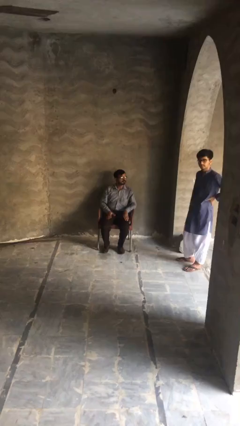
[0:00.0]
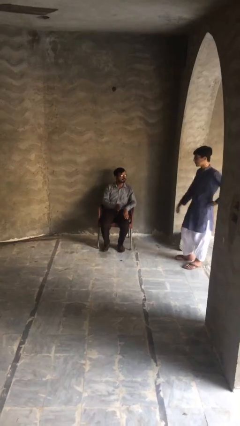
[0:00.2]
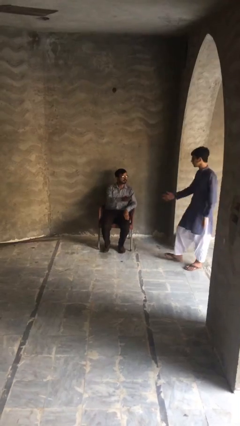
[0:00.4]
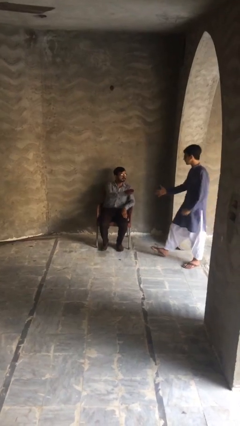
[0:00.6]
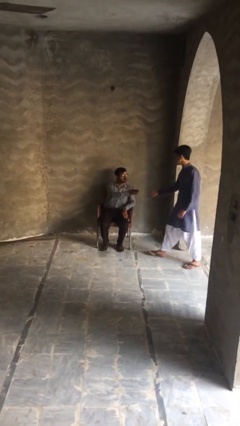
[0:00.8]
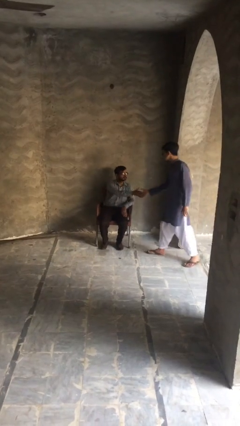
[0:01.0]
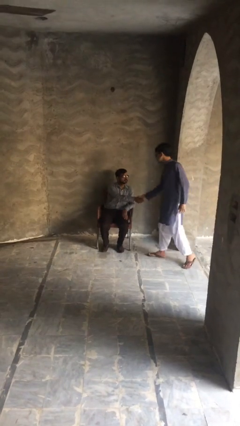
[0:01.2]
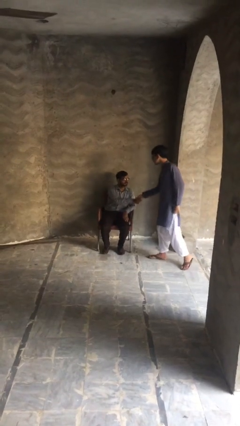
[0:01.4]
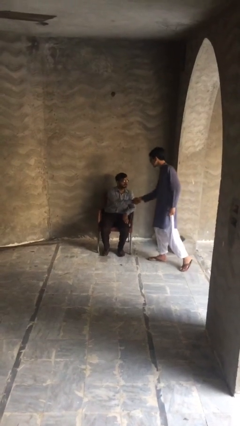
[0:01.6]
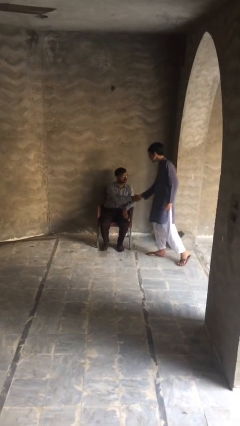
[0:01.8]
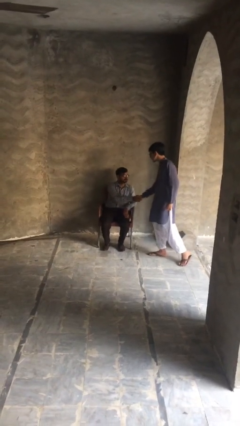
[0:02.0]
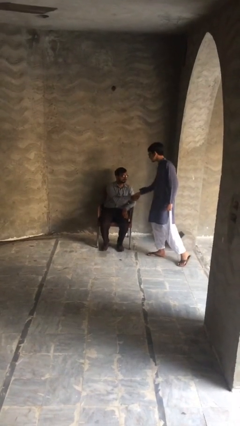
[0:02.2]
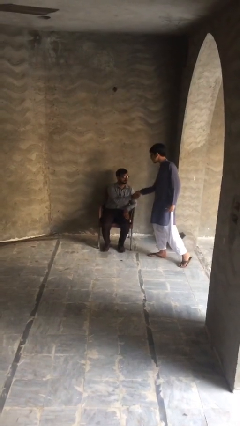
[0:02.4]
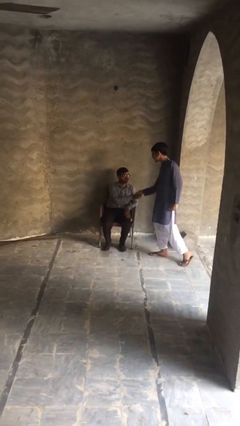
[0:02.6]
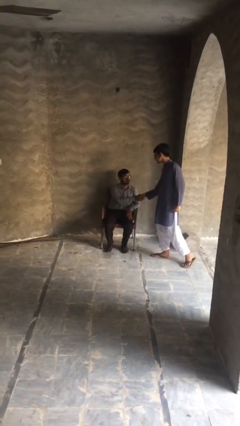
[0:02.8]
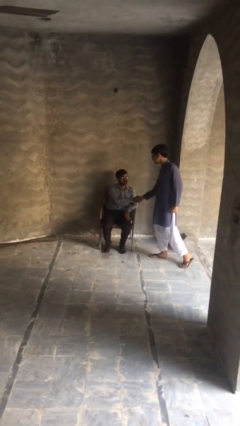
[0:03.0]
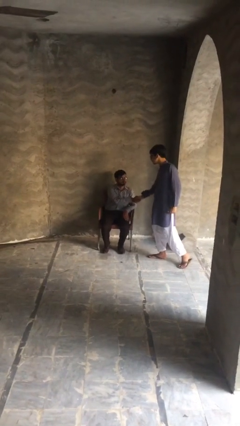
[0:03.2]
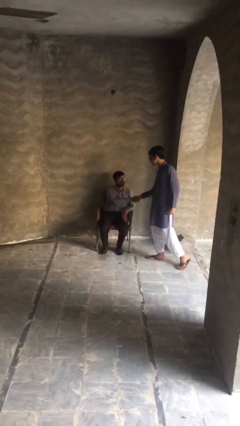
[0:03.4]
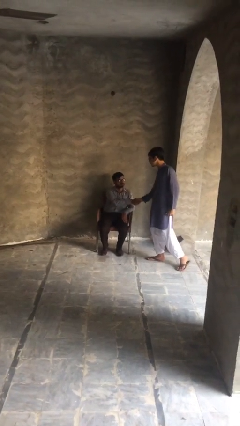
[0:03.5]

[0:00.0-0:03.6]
person shakes hand

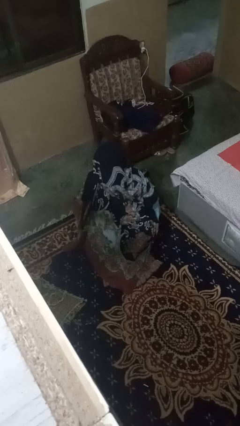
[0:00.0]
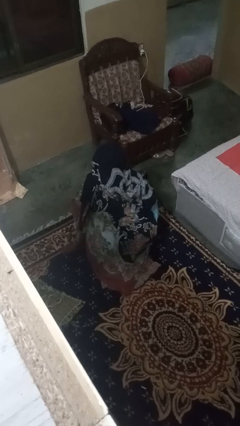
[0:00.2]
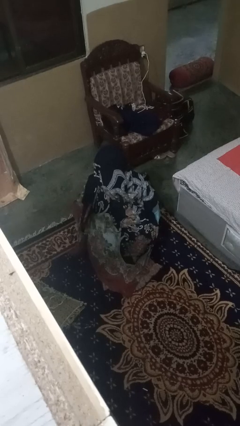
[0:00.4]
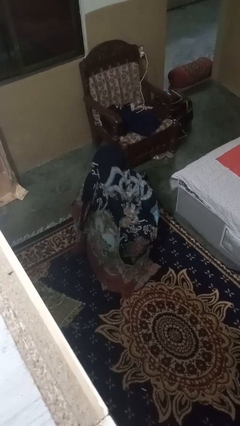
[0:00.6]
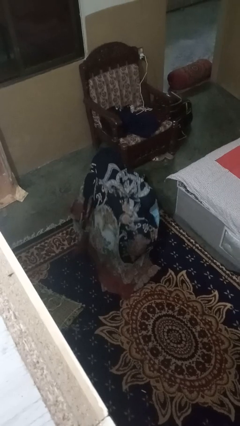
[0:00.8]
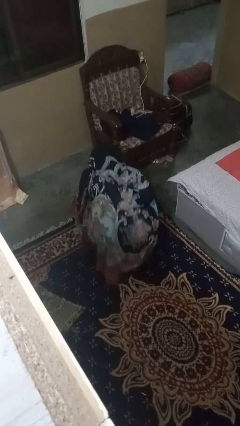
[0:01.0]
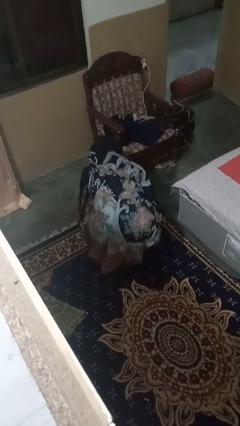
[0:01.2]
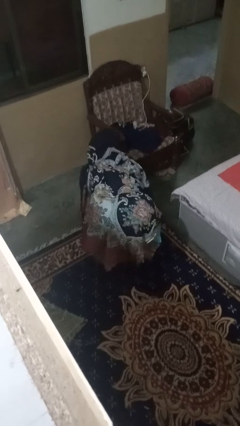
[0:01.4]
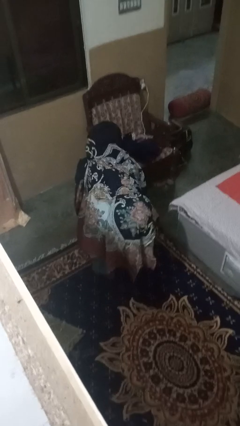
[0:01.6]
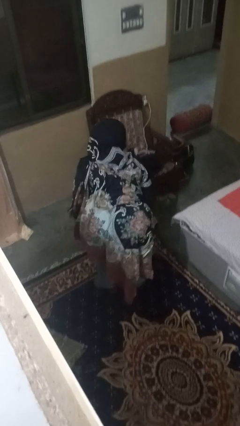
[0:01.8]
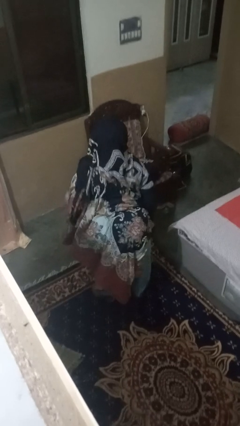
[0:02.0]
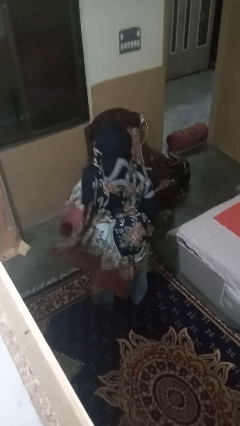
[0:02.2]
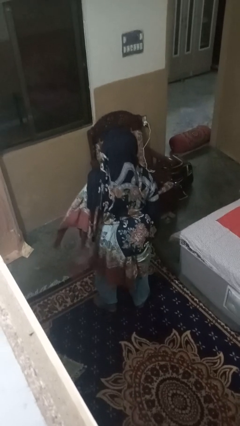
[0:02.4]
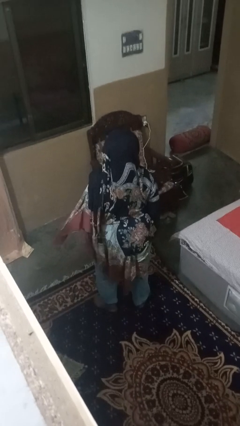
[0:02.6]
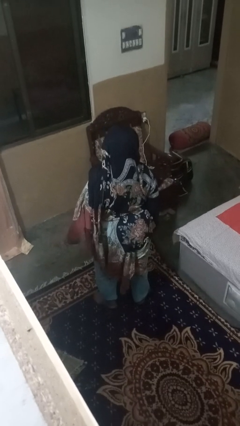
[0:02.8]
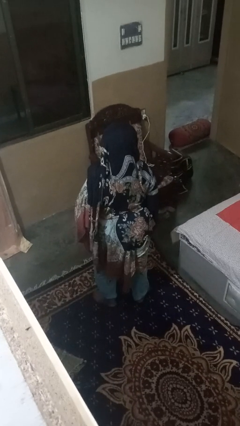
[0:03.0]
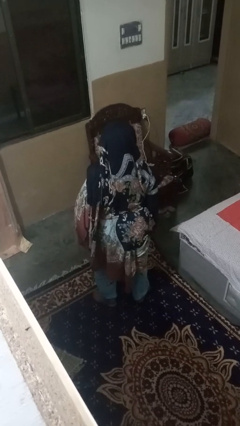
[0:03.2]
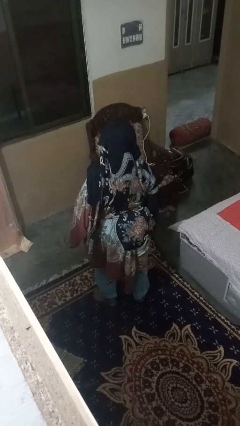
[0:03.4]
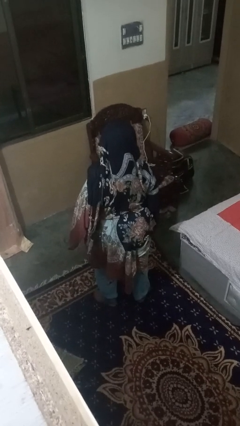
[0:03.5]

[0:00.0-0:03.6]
person stands up

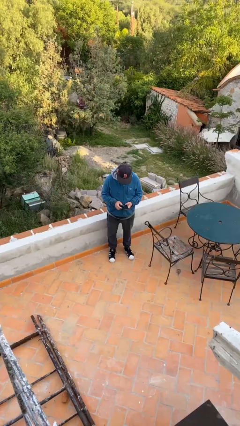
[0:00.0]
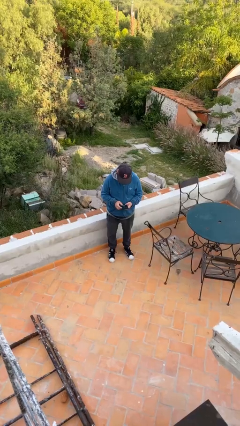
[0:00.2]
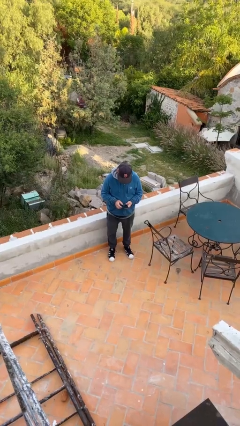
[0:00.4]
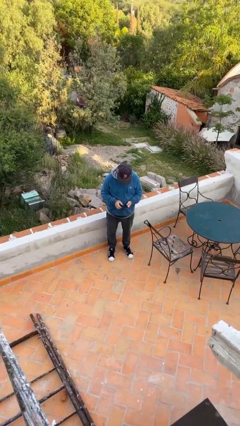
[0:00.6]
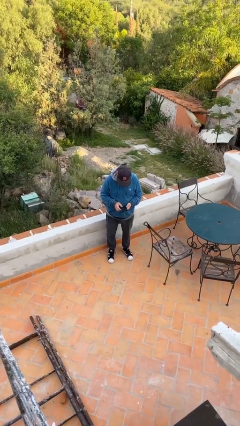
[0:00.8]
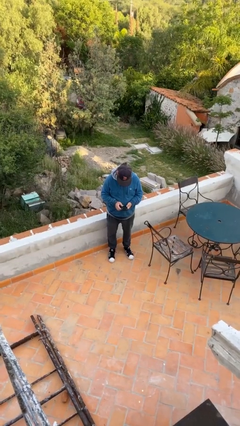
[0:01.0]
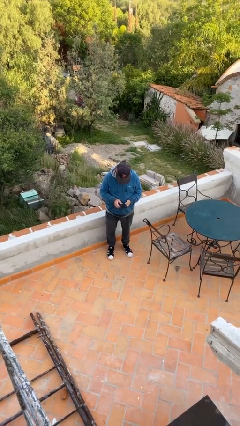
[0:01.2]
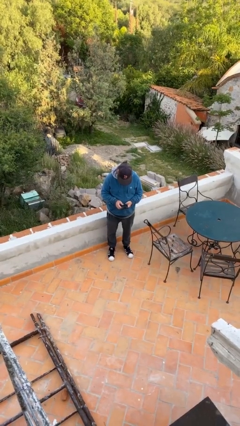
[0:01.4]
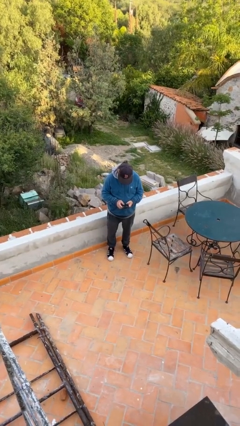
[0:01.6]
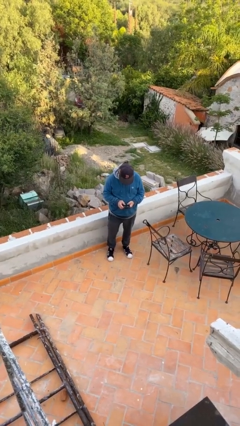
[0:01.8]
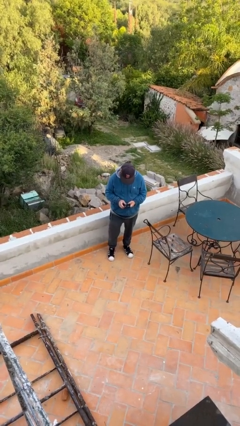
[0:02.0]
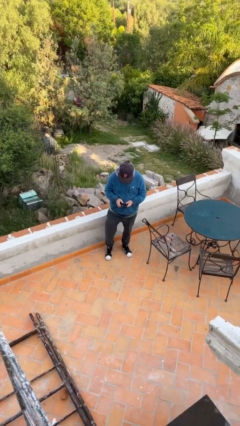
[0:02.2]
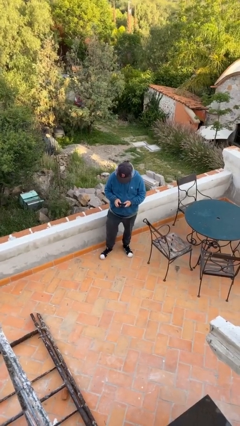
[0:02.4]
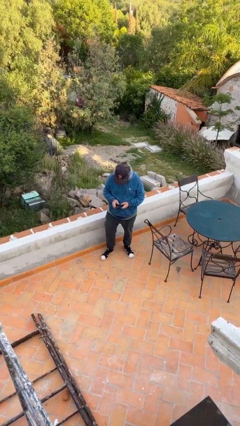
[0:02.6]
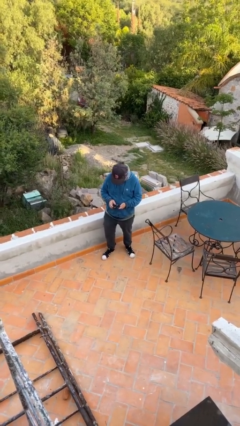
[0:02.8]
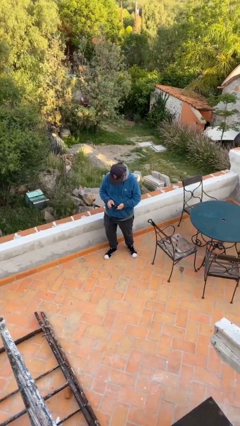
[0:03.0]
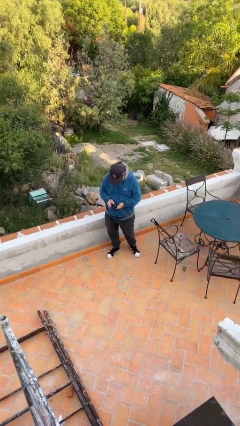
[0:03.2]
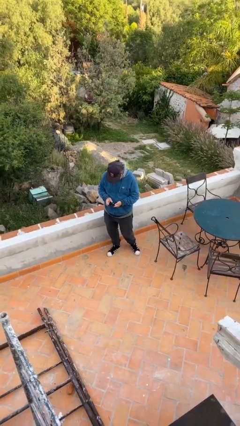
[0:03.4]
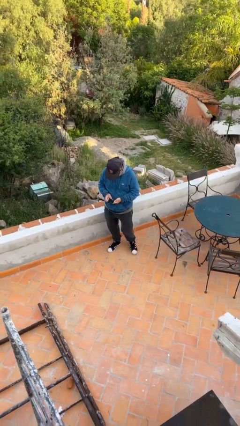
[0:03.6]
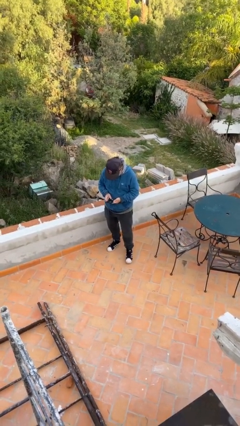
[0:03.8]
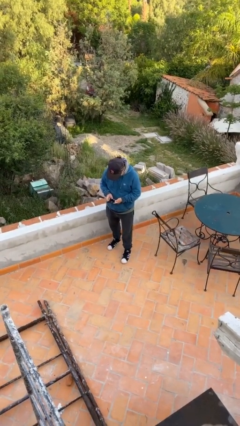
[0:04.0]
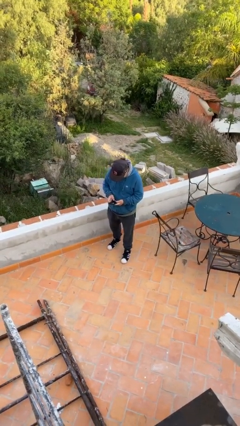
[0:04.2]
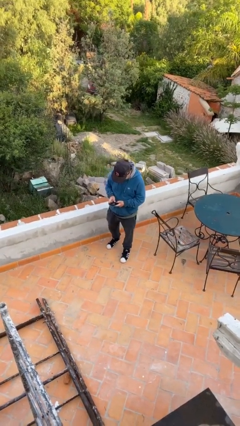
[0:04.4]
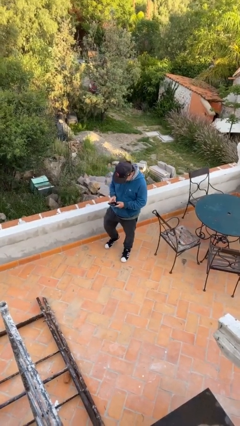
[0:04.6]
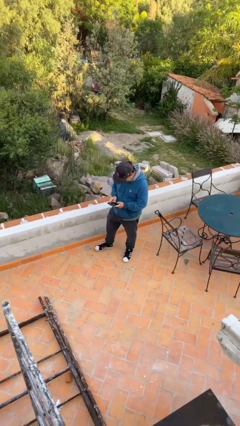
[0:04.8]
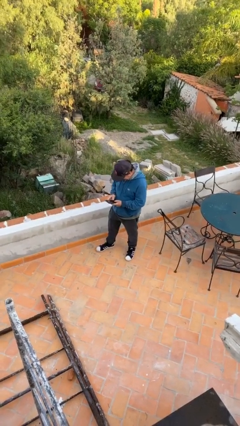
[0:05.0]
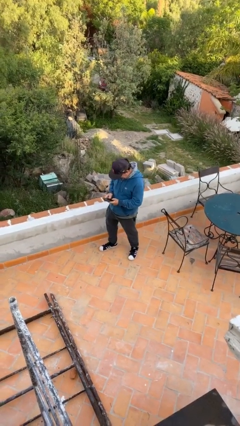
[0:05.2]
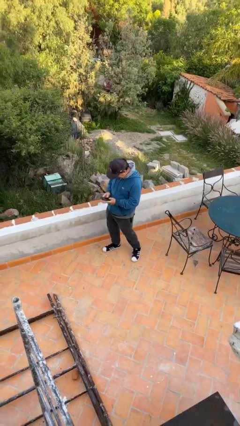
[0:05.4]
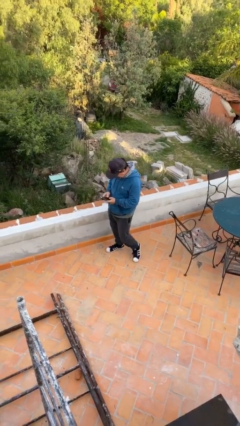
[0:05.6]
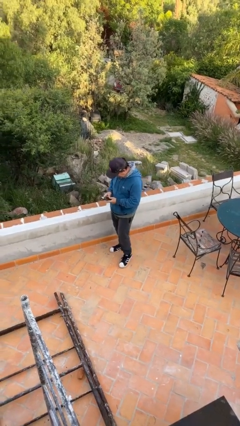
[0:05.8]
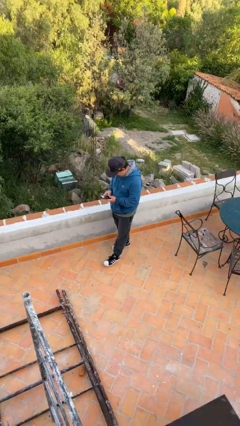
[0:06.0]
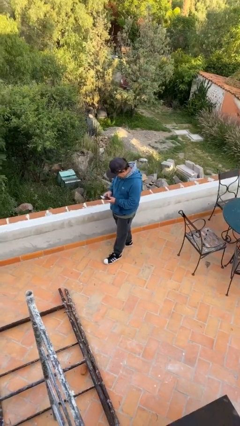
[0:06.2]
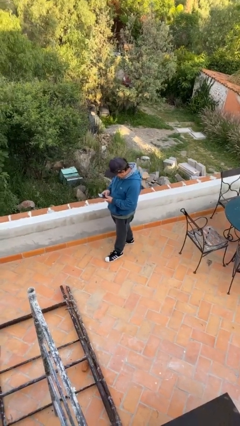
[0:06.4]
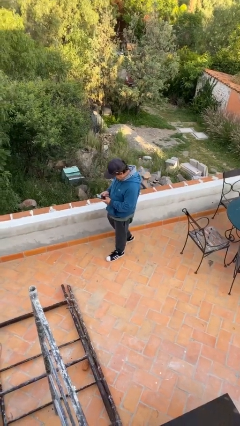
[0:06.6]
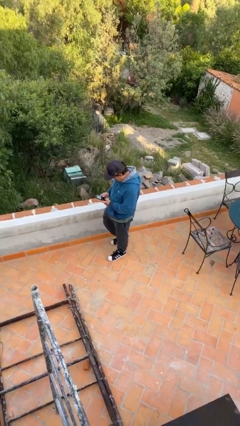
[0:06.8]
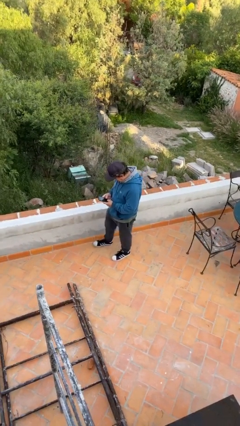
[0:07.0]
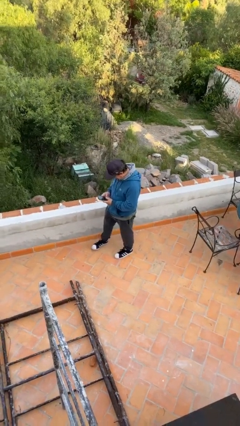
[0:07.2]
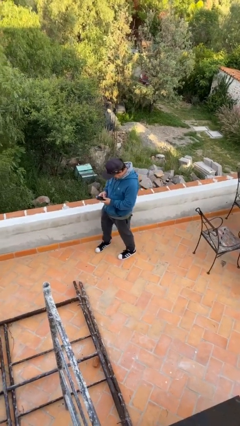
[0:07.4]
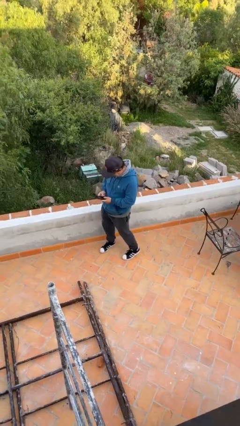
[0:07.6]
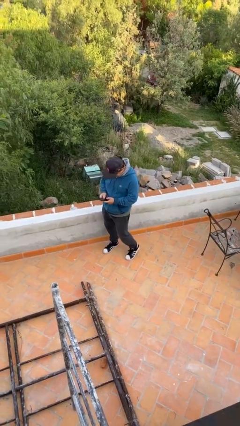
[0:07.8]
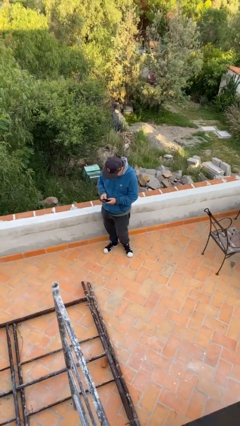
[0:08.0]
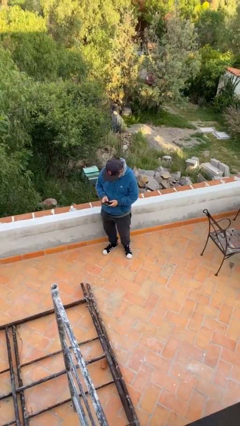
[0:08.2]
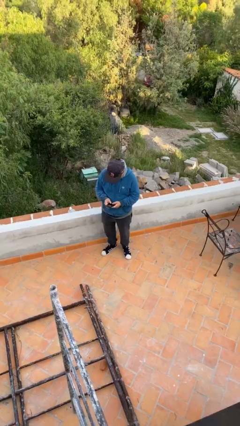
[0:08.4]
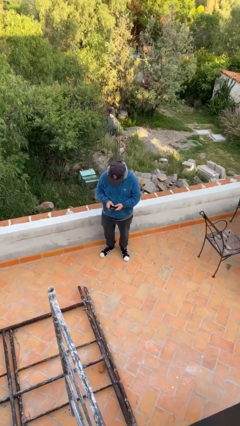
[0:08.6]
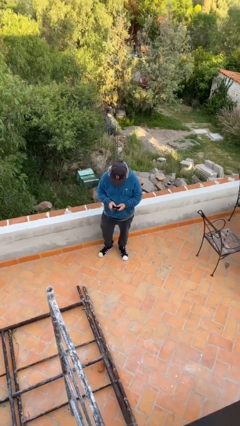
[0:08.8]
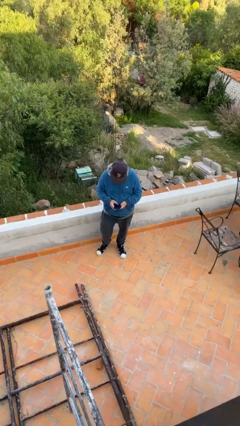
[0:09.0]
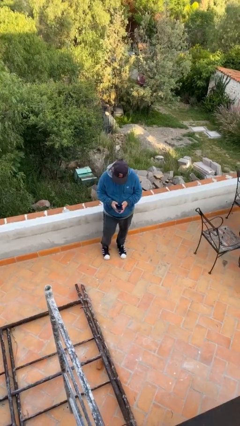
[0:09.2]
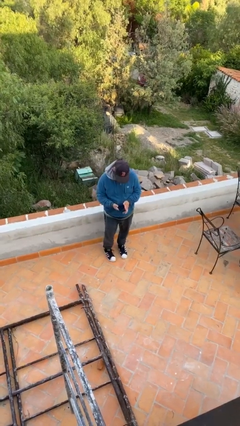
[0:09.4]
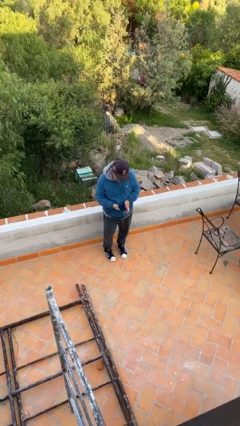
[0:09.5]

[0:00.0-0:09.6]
person texts on phone

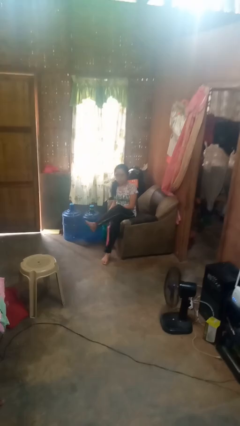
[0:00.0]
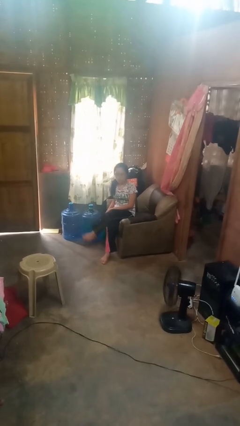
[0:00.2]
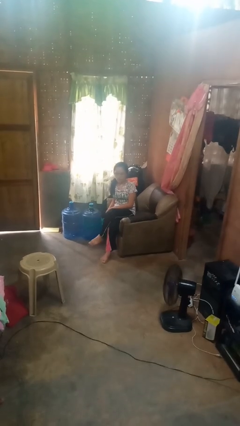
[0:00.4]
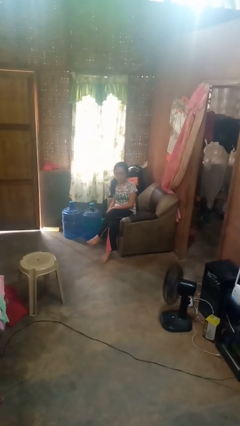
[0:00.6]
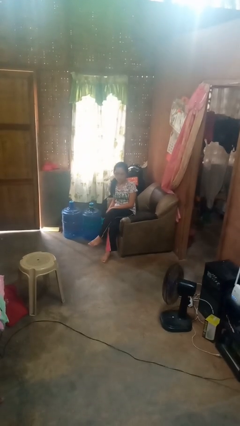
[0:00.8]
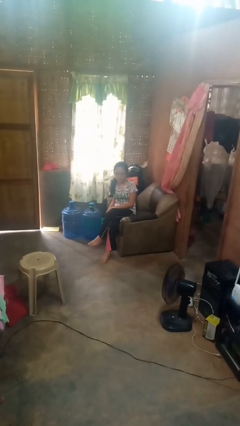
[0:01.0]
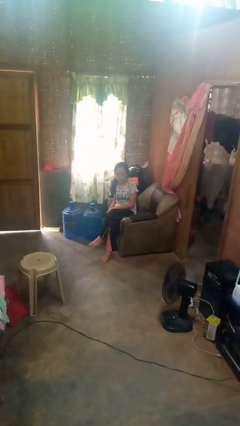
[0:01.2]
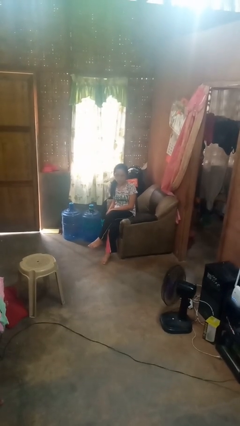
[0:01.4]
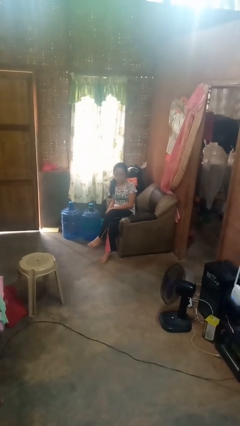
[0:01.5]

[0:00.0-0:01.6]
person crosses legs
